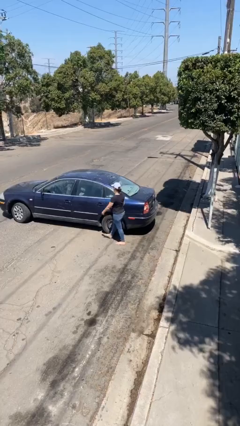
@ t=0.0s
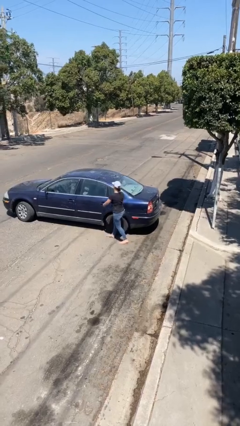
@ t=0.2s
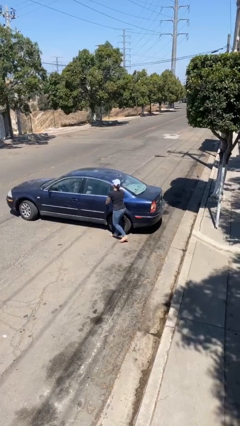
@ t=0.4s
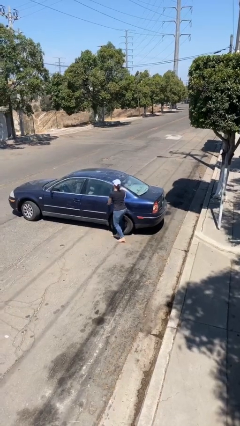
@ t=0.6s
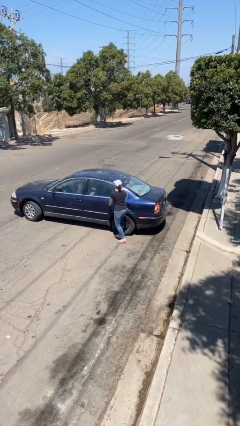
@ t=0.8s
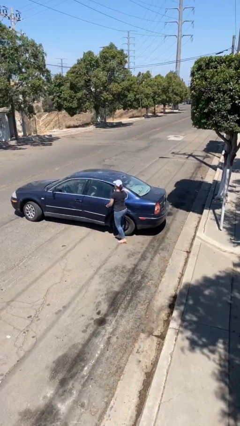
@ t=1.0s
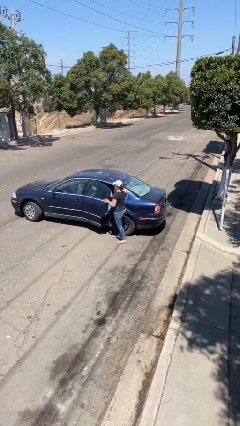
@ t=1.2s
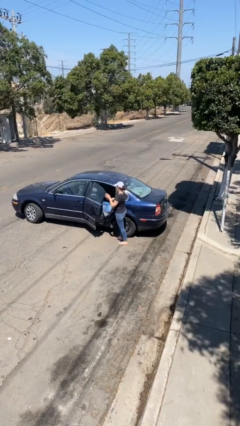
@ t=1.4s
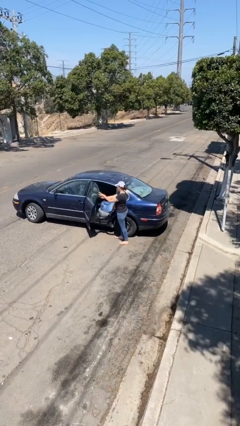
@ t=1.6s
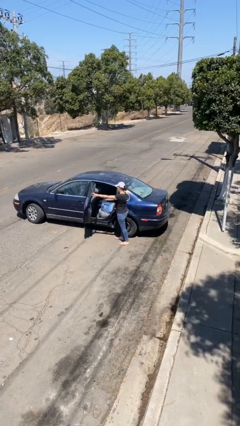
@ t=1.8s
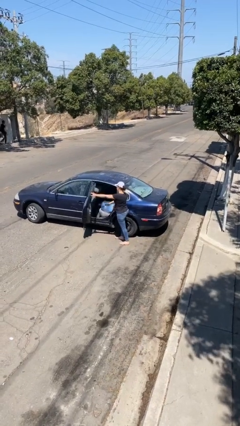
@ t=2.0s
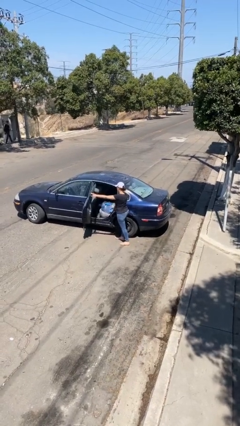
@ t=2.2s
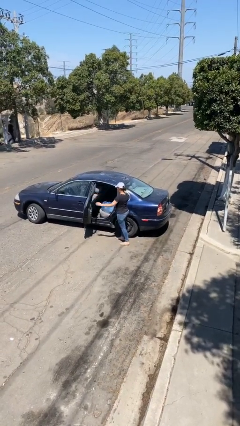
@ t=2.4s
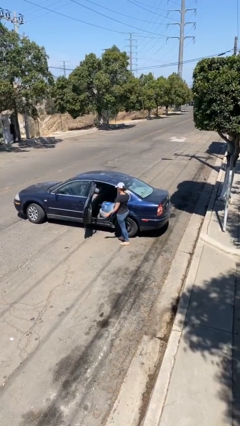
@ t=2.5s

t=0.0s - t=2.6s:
person opens car door

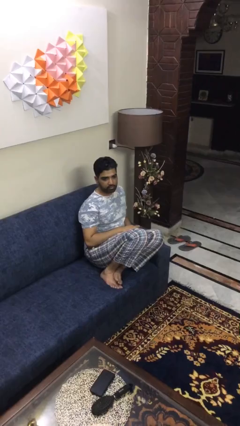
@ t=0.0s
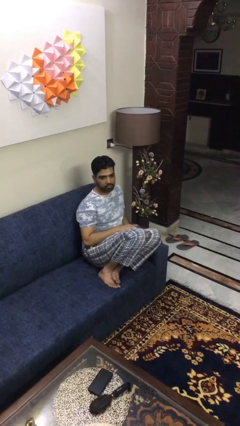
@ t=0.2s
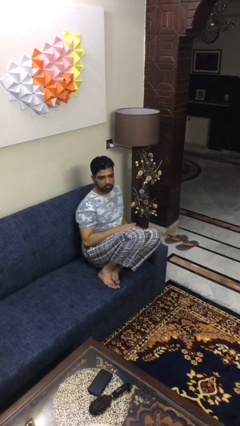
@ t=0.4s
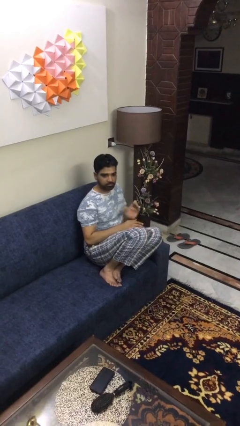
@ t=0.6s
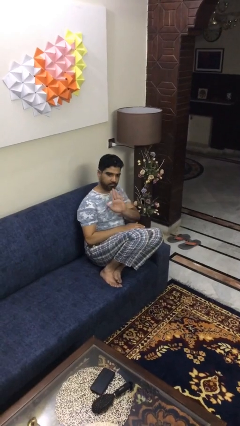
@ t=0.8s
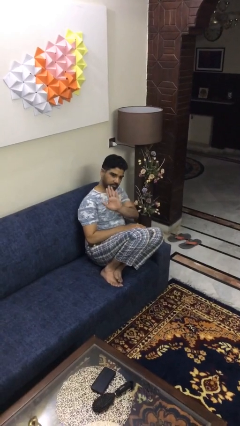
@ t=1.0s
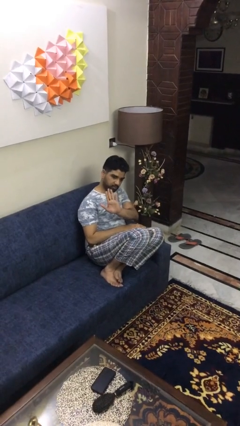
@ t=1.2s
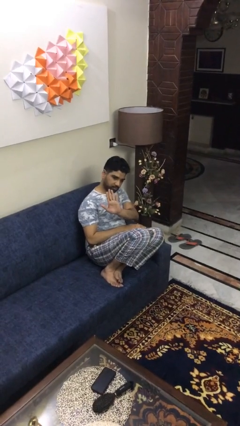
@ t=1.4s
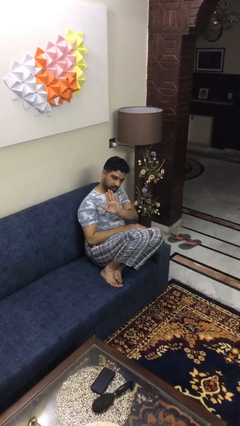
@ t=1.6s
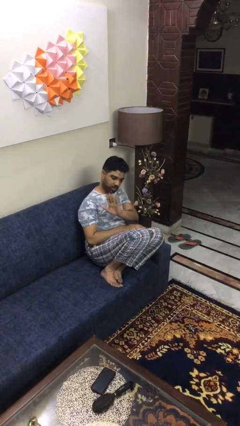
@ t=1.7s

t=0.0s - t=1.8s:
person gestures stop

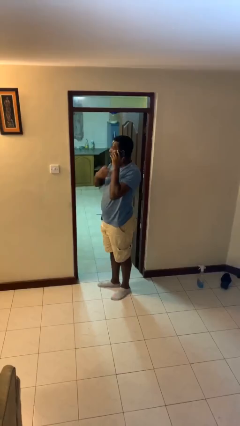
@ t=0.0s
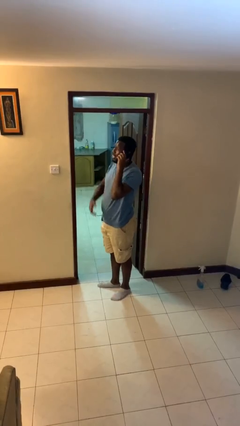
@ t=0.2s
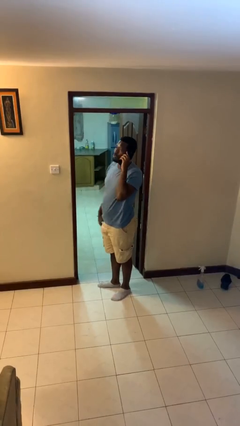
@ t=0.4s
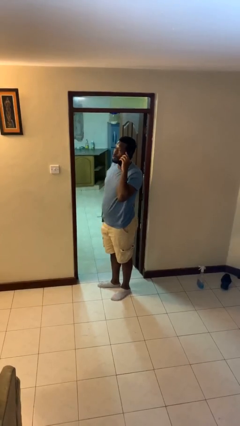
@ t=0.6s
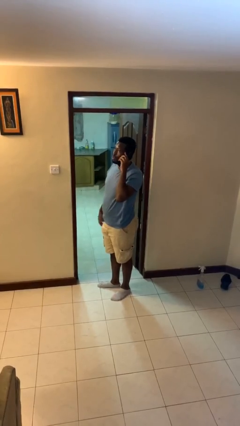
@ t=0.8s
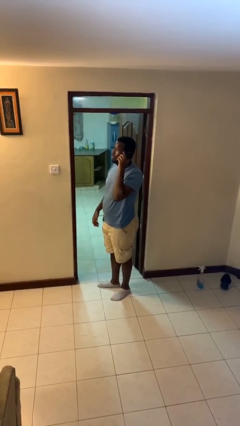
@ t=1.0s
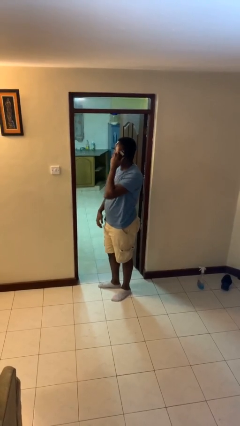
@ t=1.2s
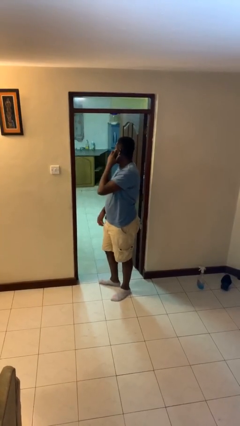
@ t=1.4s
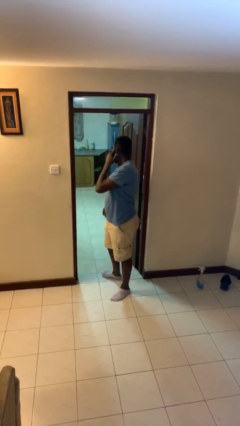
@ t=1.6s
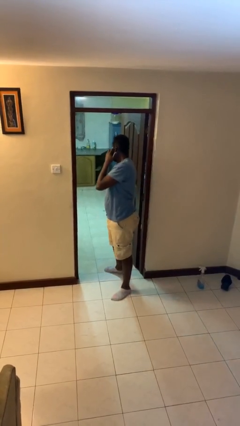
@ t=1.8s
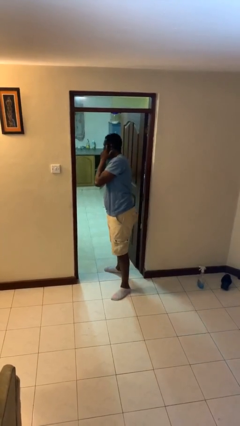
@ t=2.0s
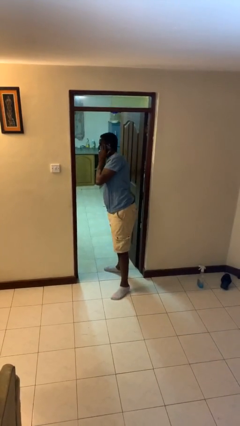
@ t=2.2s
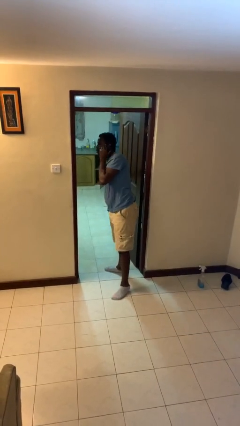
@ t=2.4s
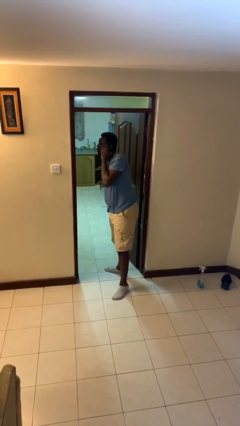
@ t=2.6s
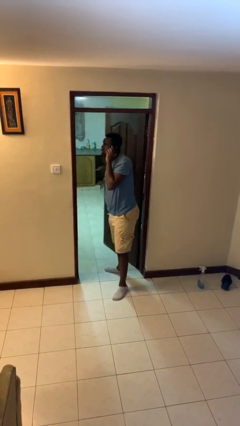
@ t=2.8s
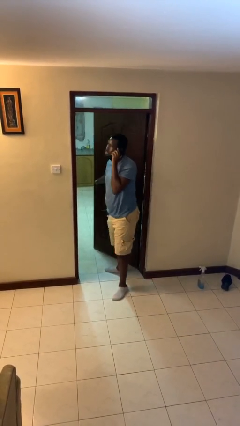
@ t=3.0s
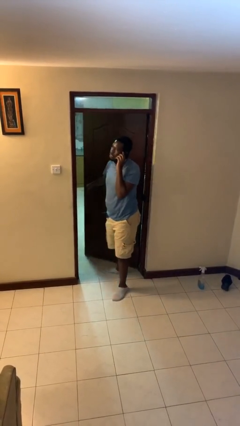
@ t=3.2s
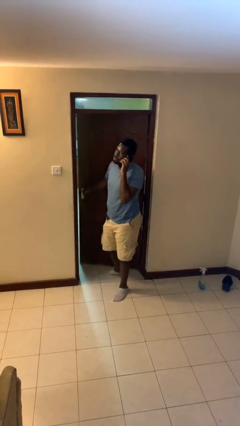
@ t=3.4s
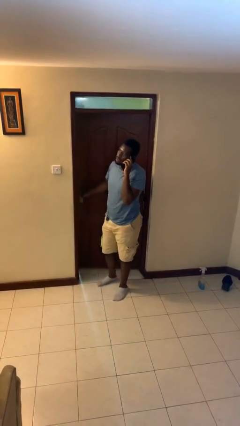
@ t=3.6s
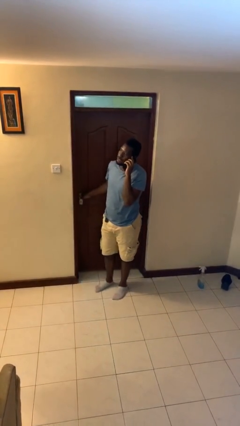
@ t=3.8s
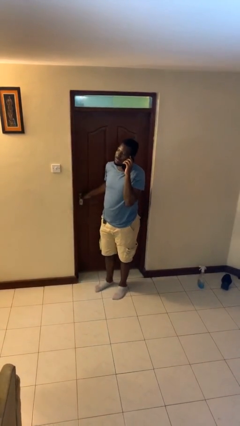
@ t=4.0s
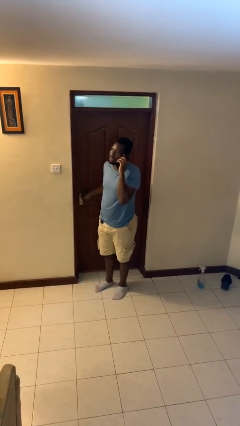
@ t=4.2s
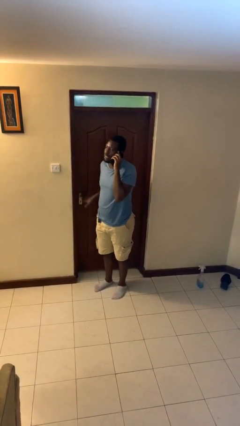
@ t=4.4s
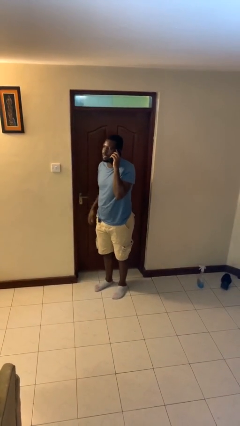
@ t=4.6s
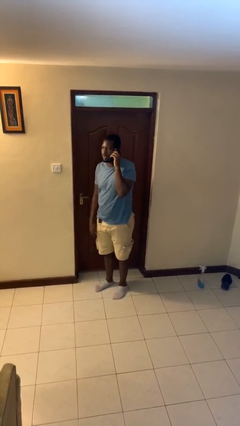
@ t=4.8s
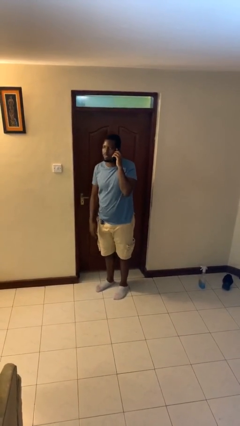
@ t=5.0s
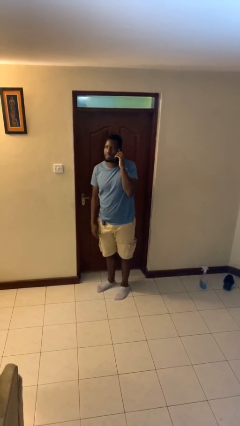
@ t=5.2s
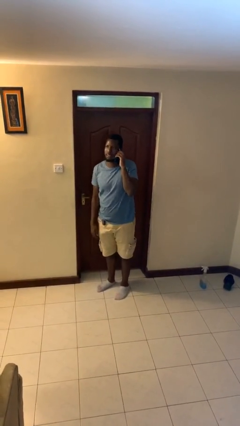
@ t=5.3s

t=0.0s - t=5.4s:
person closes facility door

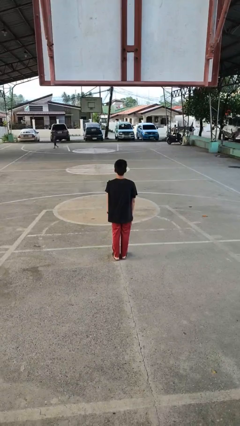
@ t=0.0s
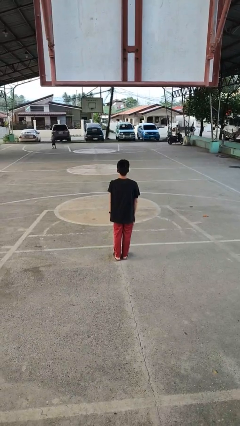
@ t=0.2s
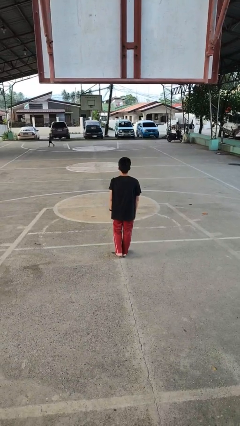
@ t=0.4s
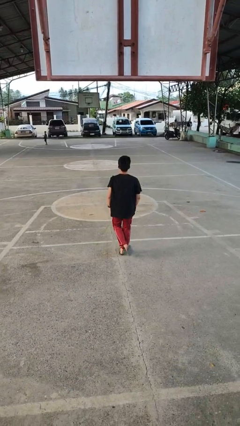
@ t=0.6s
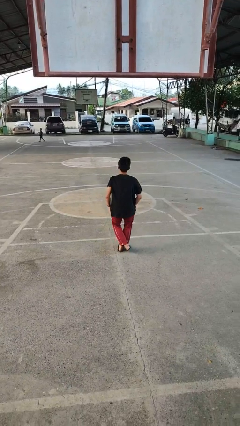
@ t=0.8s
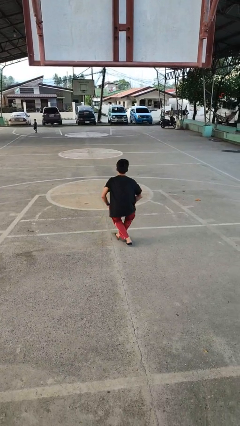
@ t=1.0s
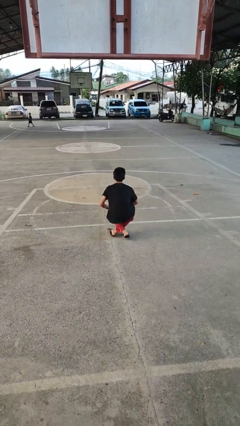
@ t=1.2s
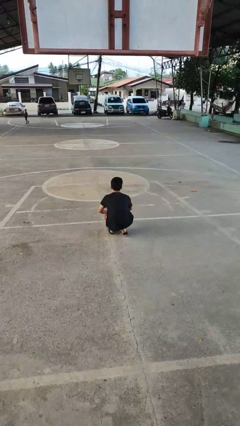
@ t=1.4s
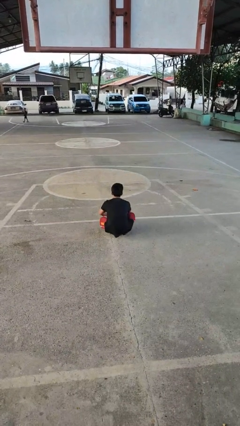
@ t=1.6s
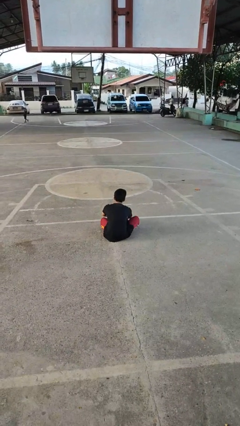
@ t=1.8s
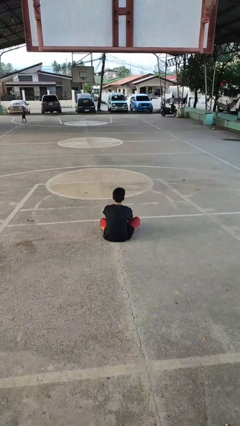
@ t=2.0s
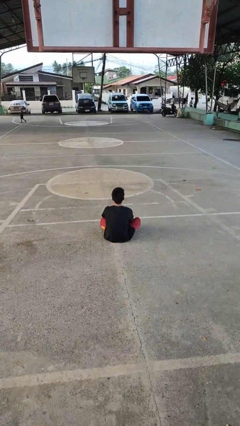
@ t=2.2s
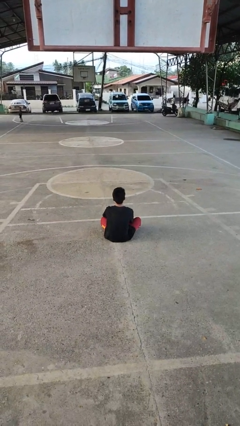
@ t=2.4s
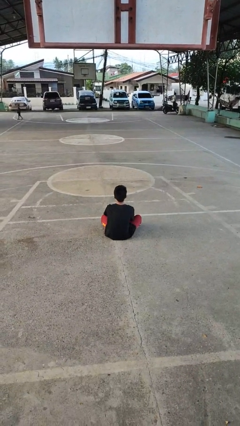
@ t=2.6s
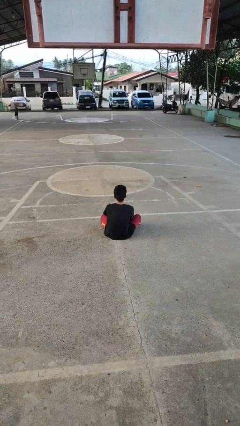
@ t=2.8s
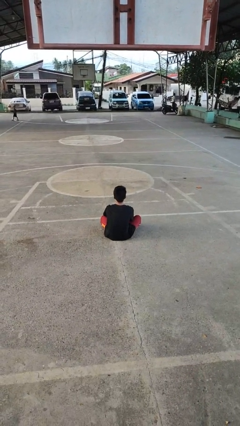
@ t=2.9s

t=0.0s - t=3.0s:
person sits crisscross

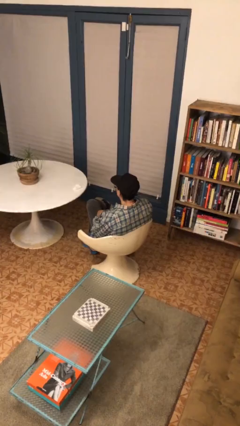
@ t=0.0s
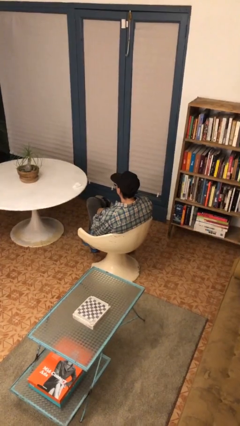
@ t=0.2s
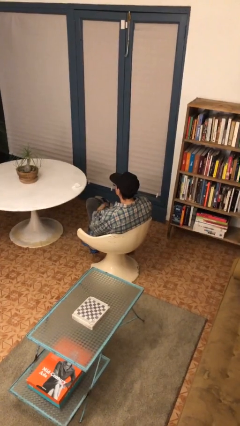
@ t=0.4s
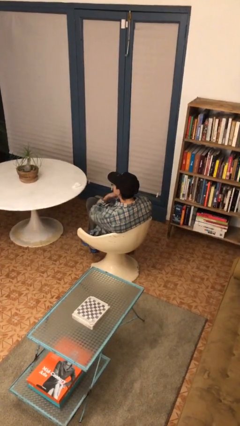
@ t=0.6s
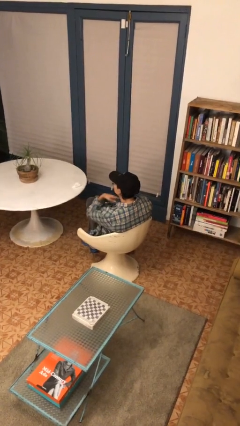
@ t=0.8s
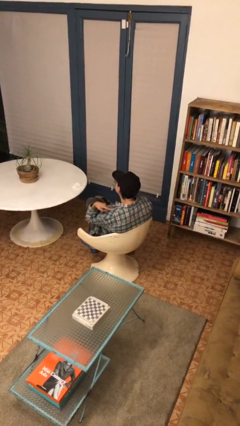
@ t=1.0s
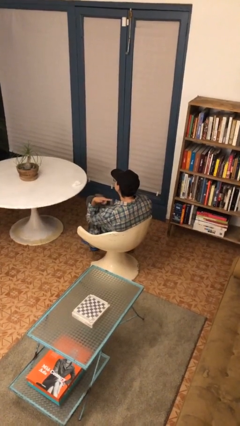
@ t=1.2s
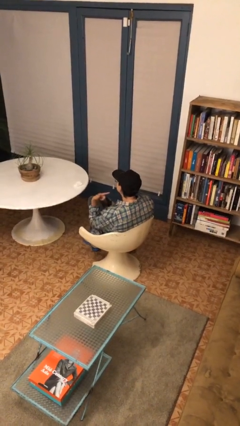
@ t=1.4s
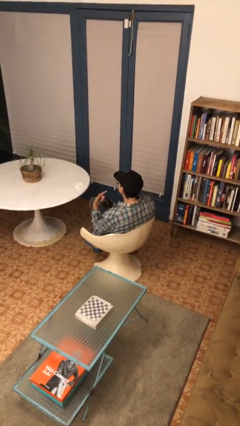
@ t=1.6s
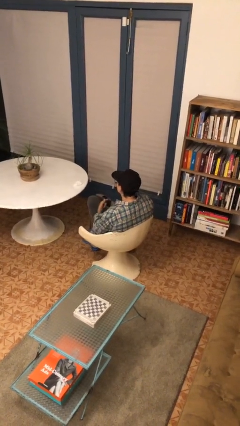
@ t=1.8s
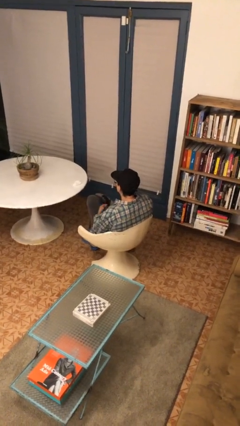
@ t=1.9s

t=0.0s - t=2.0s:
person gestures cut

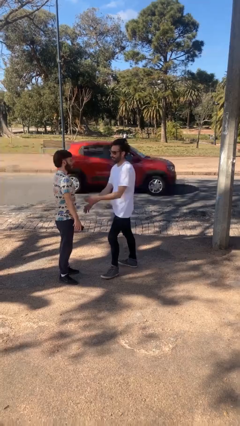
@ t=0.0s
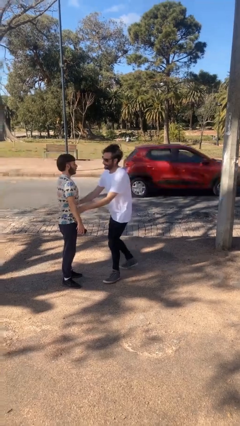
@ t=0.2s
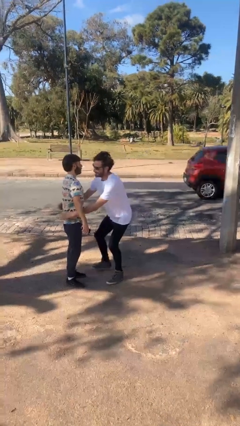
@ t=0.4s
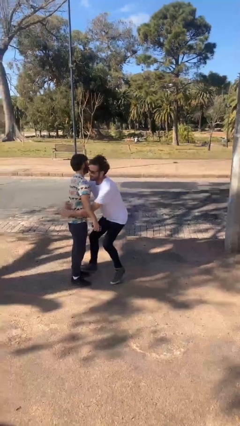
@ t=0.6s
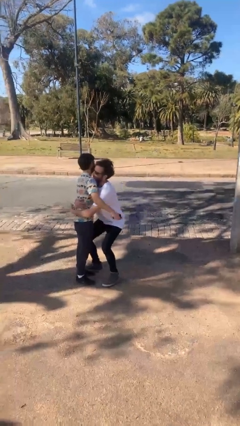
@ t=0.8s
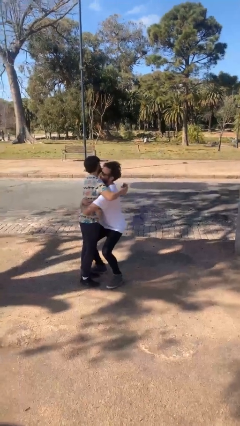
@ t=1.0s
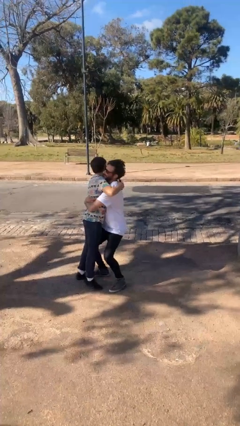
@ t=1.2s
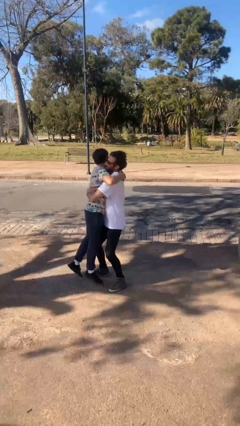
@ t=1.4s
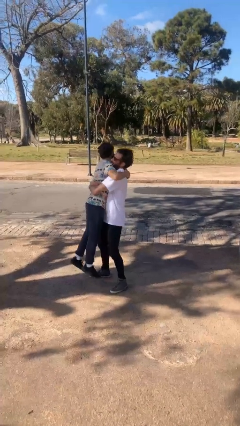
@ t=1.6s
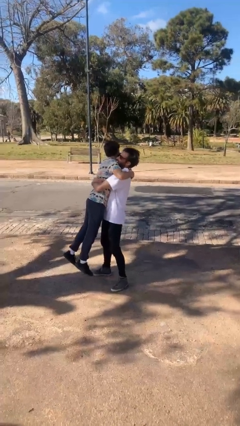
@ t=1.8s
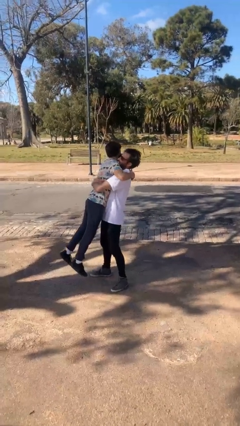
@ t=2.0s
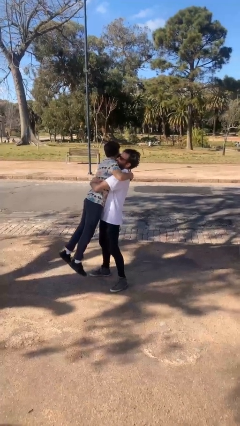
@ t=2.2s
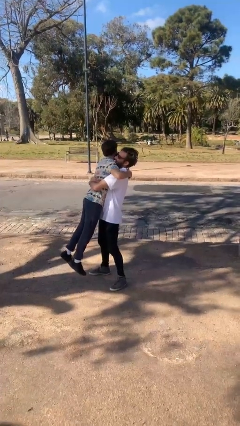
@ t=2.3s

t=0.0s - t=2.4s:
person picks up person

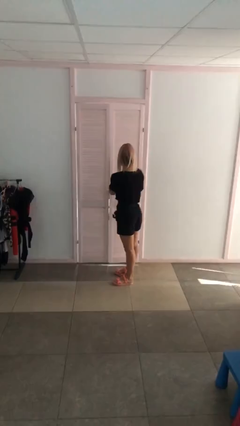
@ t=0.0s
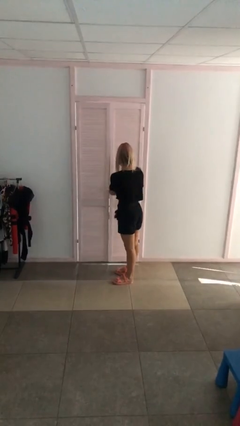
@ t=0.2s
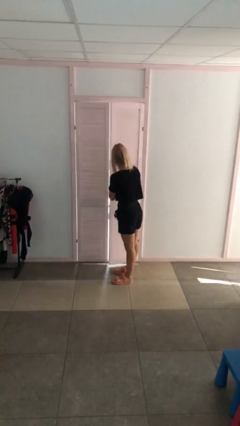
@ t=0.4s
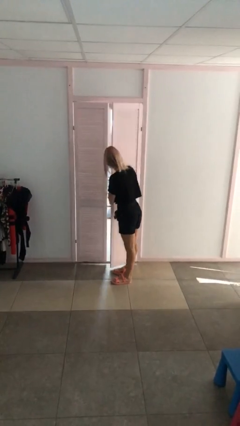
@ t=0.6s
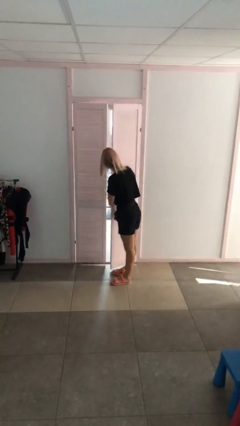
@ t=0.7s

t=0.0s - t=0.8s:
person opens facility door
